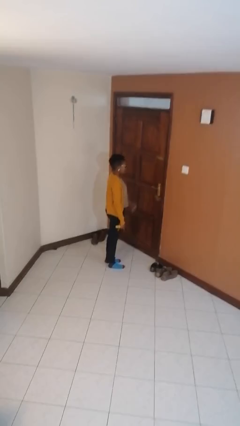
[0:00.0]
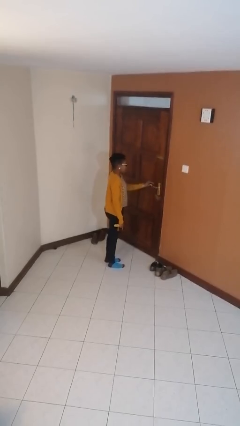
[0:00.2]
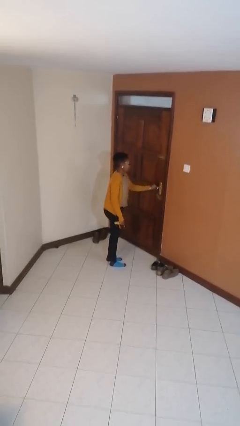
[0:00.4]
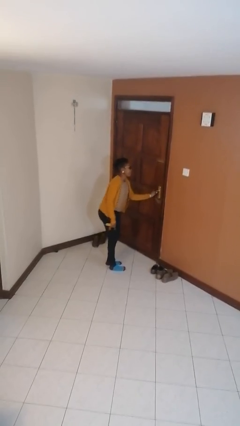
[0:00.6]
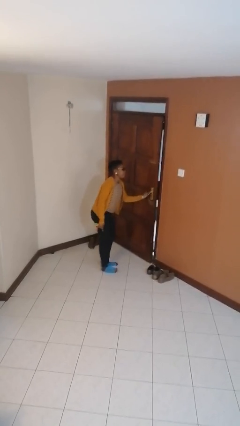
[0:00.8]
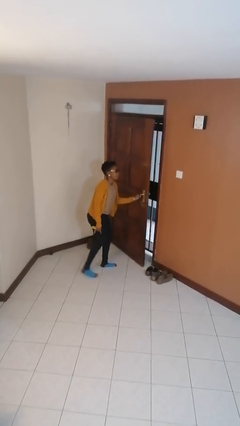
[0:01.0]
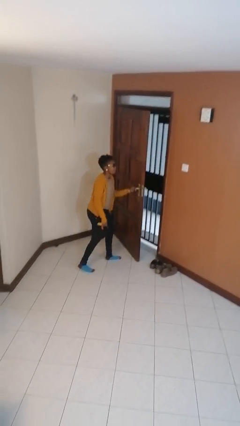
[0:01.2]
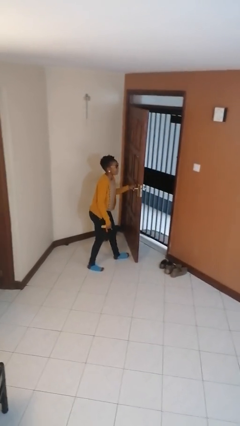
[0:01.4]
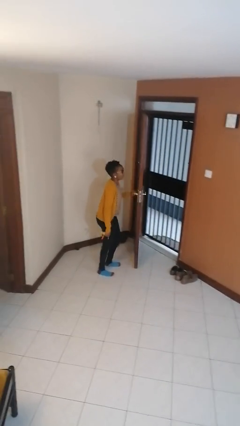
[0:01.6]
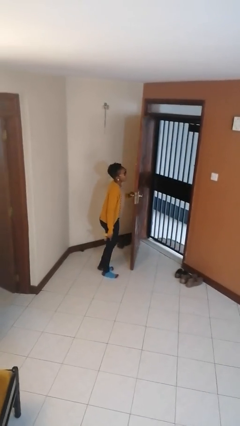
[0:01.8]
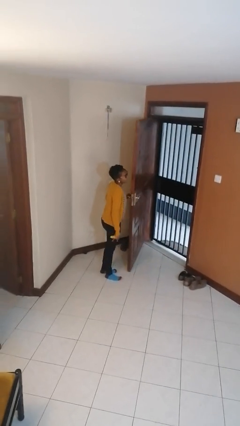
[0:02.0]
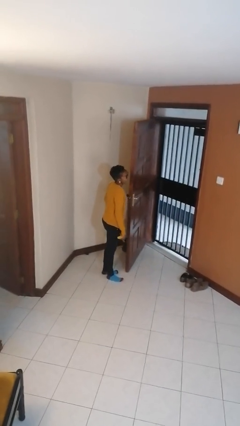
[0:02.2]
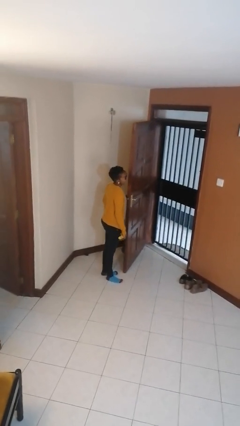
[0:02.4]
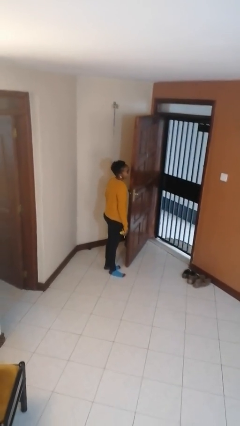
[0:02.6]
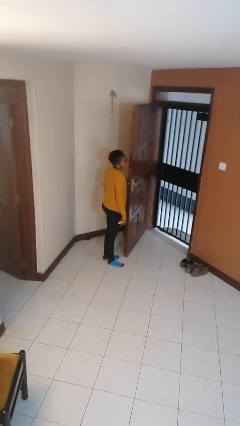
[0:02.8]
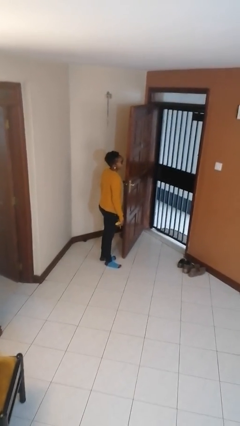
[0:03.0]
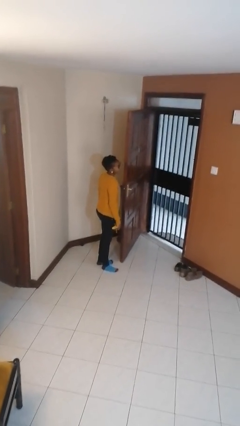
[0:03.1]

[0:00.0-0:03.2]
person opens facility door

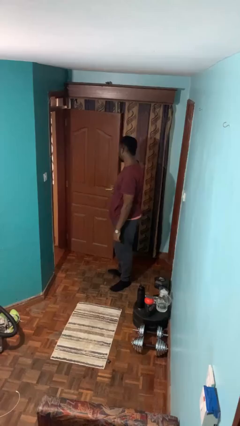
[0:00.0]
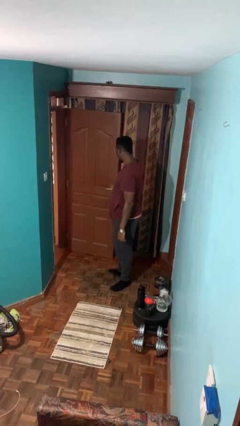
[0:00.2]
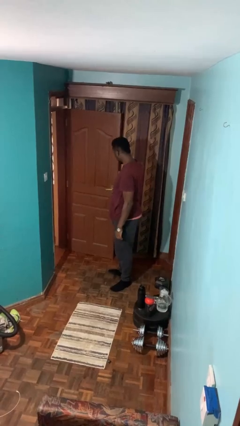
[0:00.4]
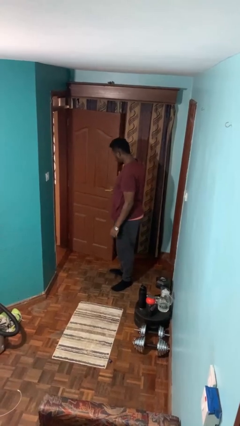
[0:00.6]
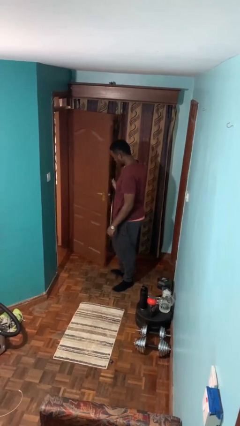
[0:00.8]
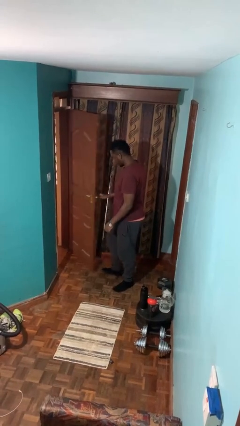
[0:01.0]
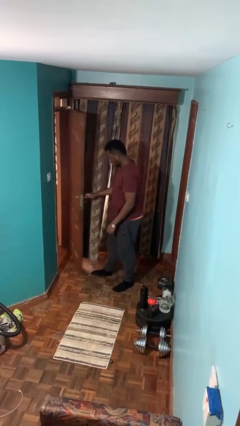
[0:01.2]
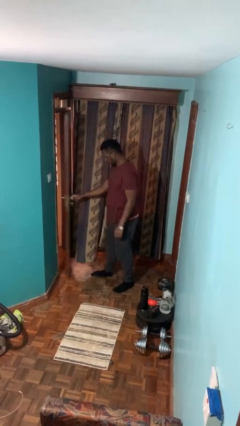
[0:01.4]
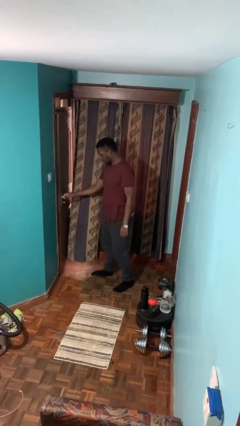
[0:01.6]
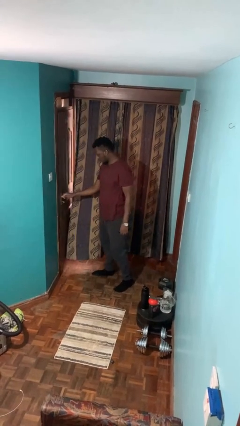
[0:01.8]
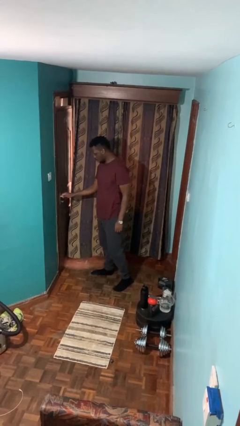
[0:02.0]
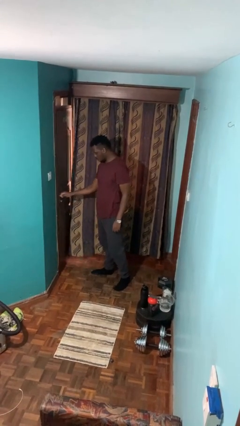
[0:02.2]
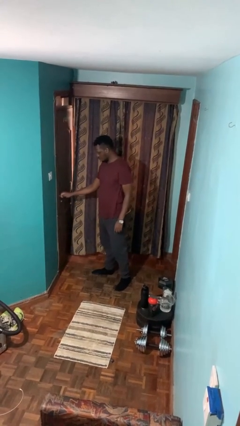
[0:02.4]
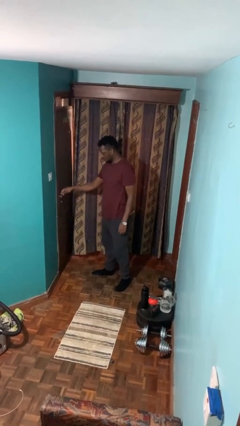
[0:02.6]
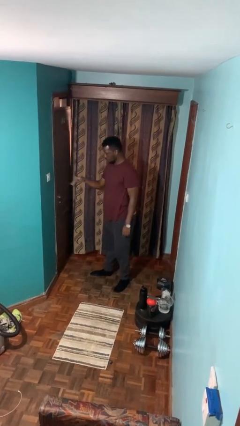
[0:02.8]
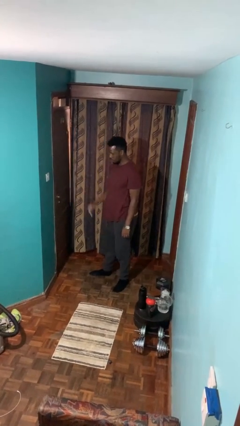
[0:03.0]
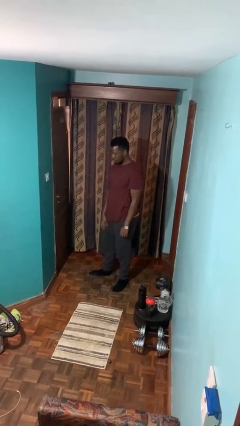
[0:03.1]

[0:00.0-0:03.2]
person closes facility door

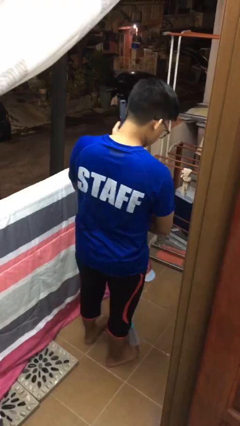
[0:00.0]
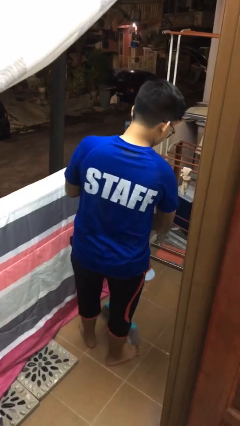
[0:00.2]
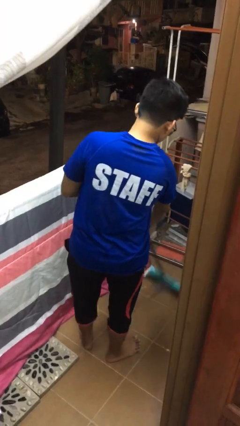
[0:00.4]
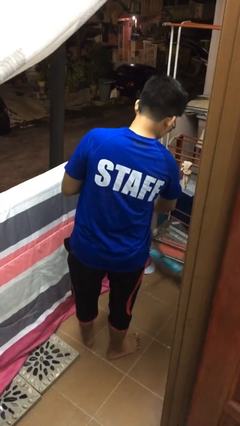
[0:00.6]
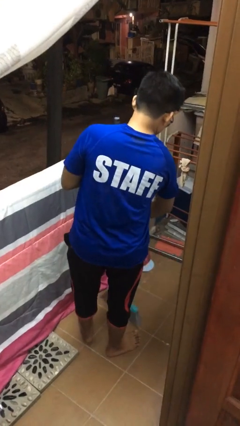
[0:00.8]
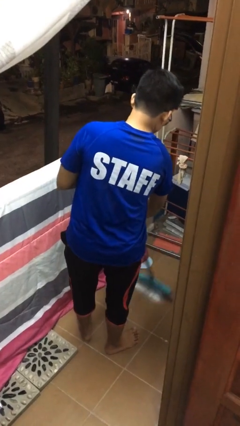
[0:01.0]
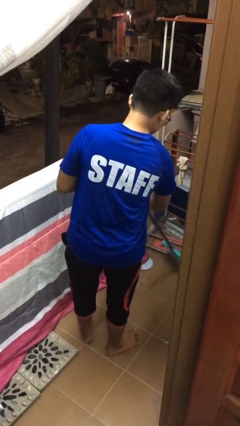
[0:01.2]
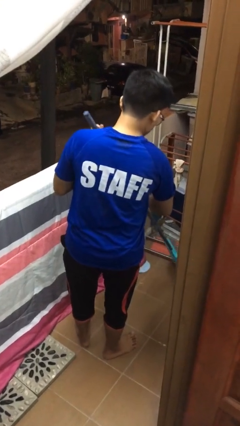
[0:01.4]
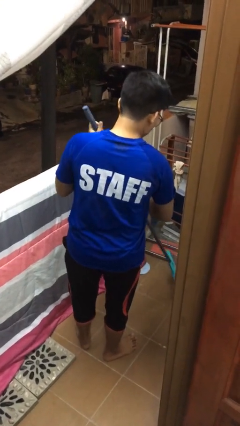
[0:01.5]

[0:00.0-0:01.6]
person sweeps floor

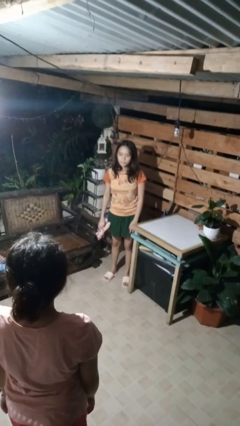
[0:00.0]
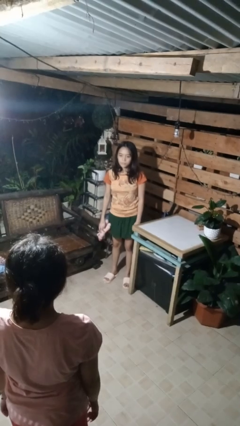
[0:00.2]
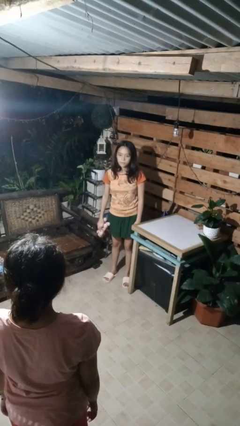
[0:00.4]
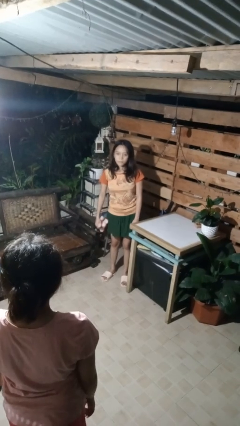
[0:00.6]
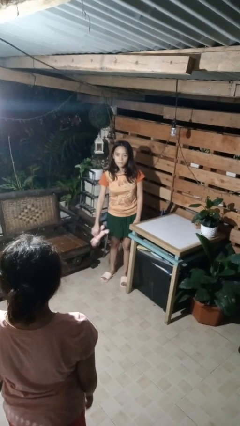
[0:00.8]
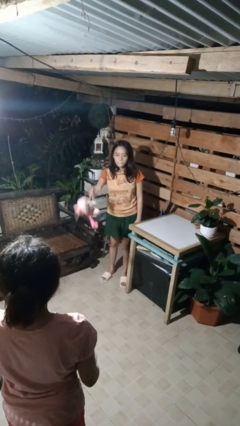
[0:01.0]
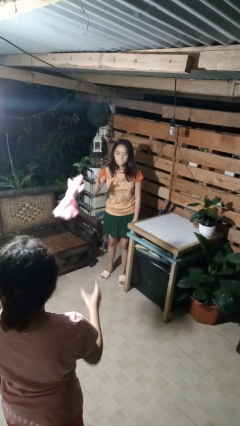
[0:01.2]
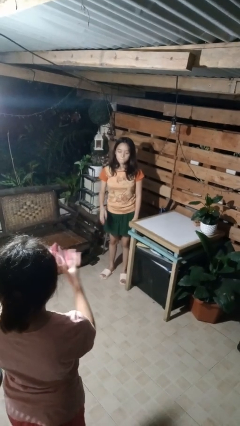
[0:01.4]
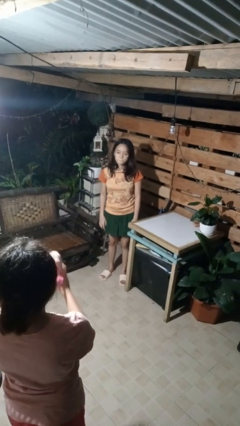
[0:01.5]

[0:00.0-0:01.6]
person throws object to person

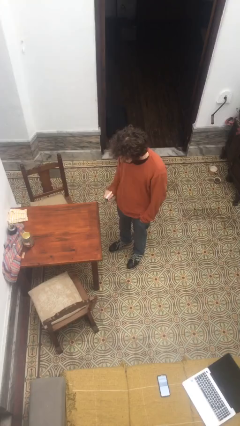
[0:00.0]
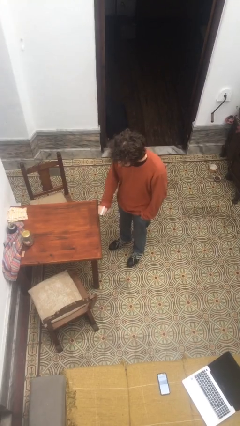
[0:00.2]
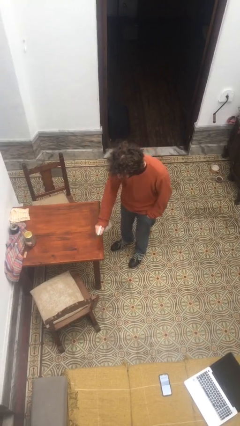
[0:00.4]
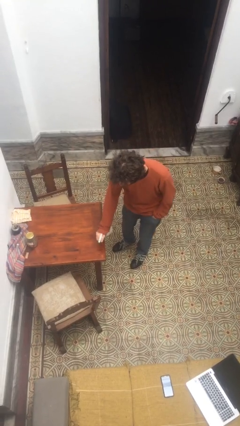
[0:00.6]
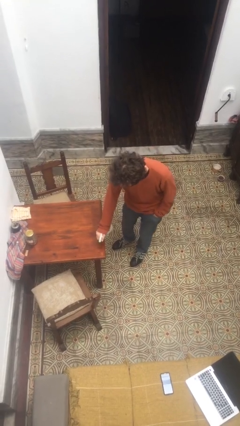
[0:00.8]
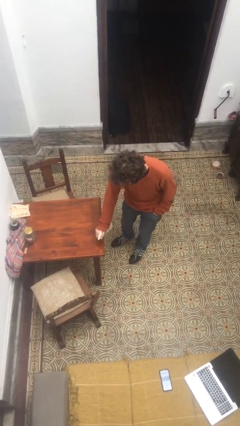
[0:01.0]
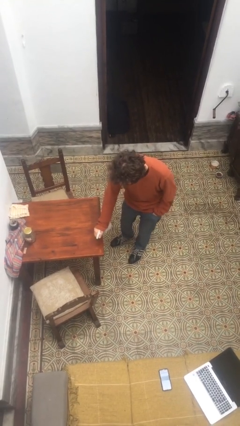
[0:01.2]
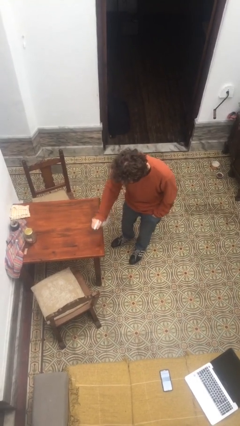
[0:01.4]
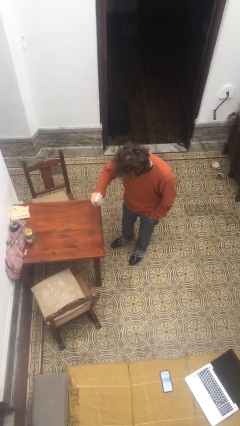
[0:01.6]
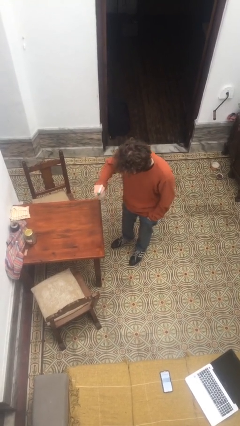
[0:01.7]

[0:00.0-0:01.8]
person sprays from bottle

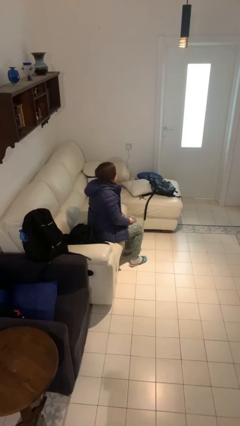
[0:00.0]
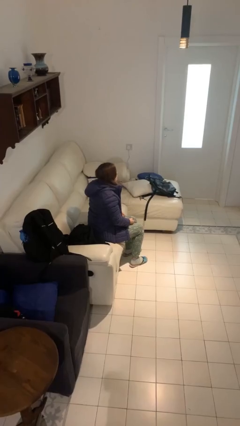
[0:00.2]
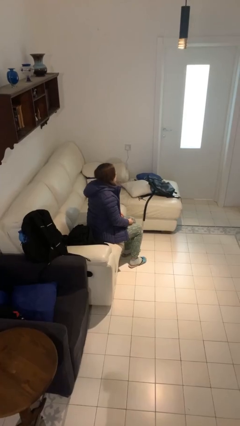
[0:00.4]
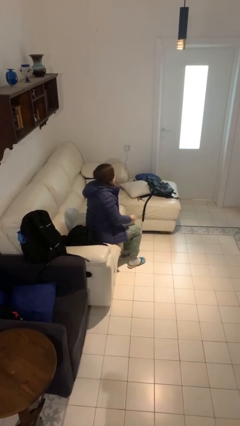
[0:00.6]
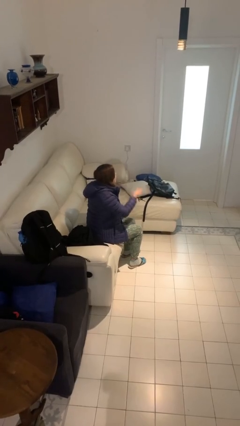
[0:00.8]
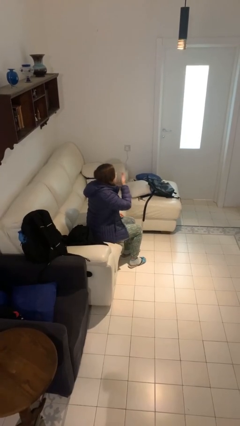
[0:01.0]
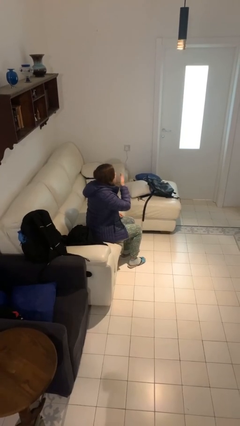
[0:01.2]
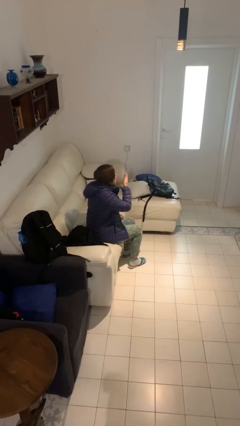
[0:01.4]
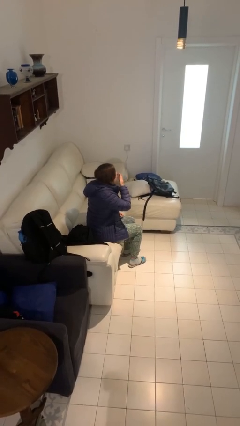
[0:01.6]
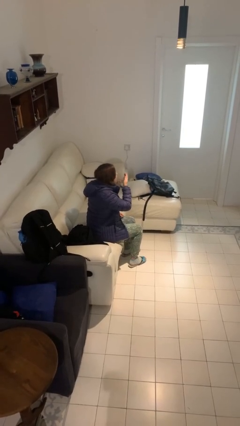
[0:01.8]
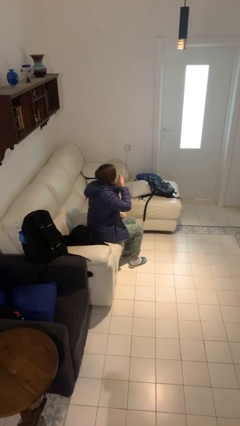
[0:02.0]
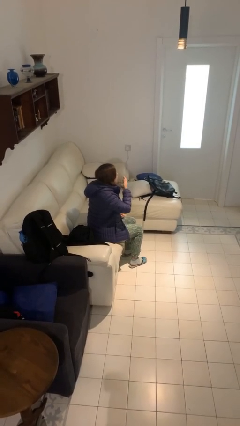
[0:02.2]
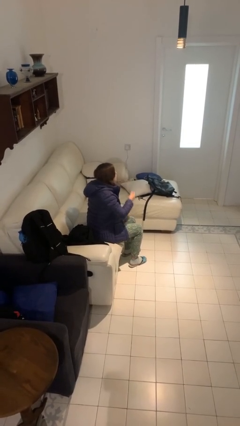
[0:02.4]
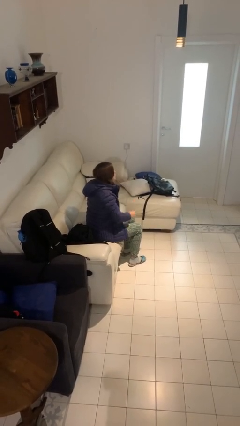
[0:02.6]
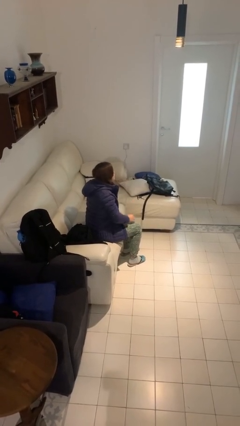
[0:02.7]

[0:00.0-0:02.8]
person yawns

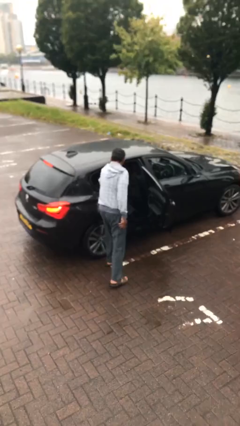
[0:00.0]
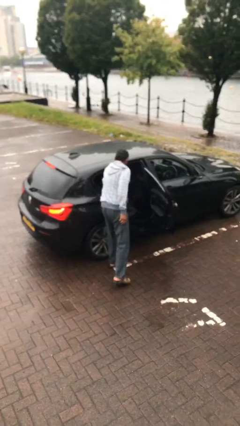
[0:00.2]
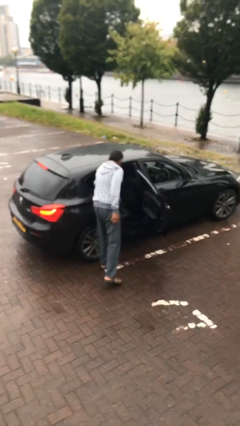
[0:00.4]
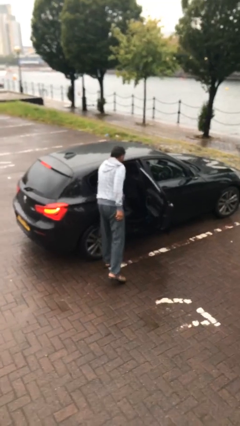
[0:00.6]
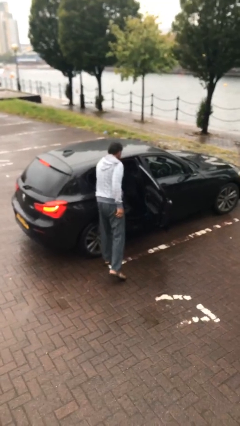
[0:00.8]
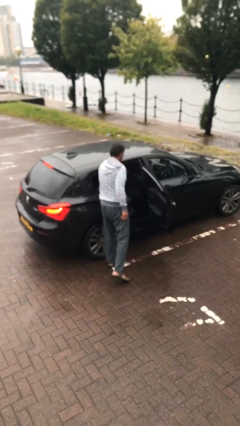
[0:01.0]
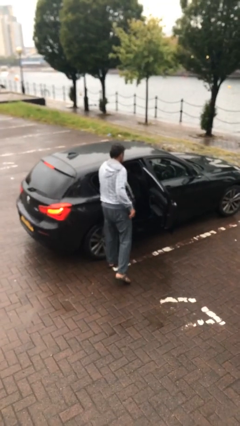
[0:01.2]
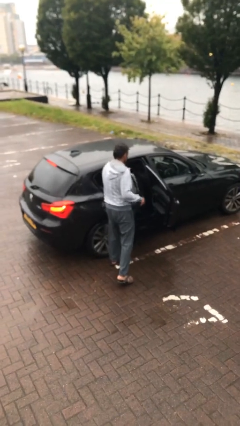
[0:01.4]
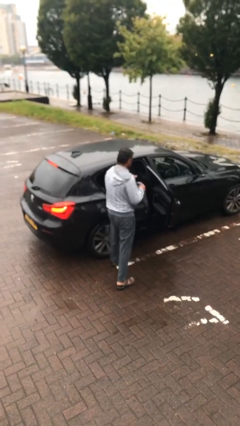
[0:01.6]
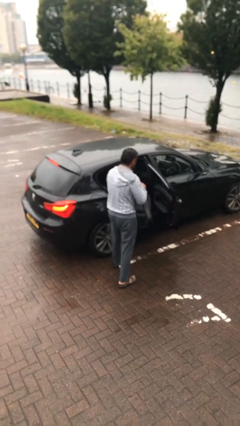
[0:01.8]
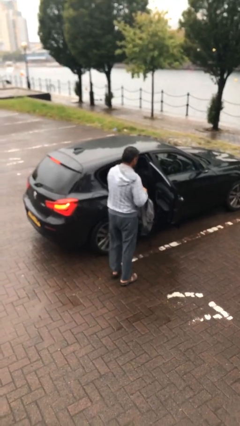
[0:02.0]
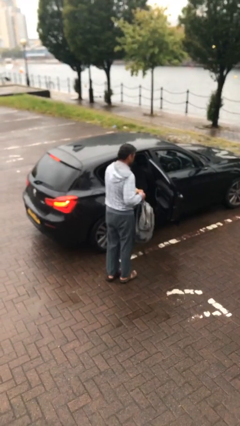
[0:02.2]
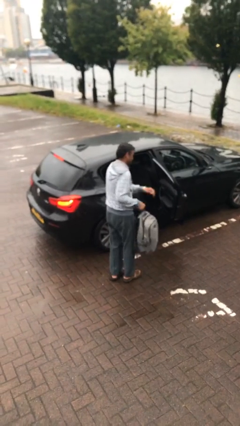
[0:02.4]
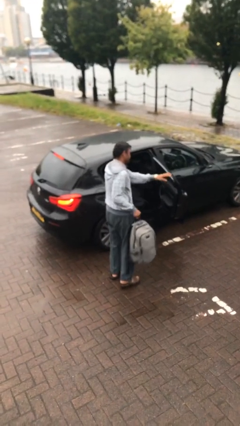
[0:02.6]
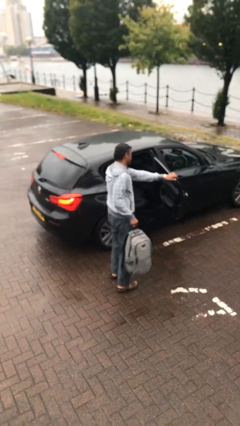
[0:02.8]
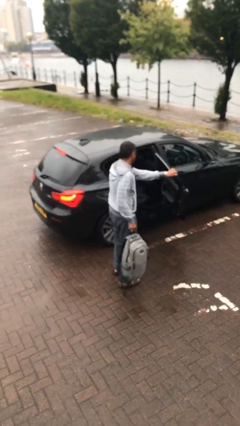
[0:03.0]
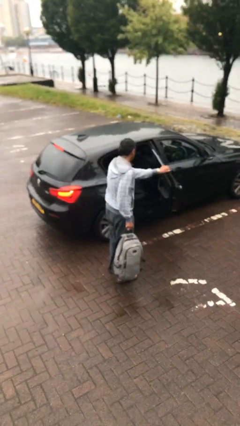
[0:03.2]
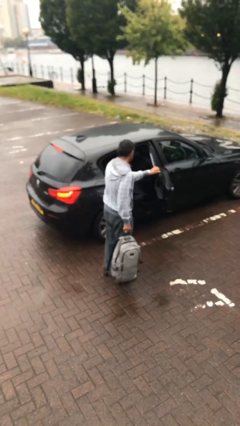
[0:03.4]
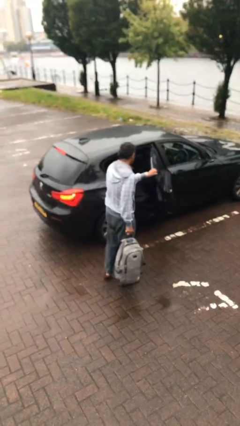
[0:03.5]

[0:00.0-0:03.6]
person unloads car
